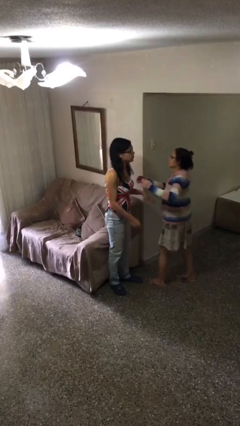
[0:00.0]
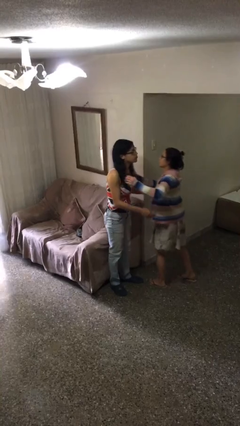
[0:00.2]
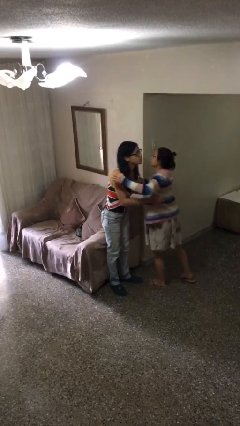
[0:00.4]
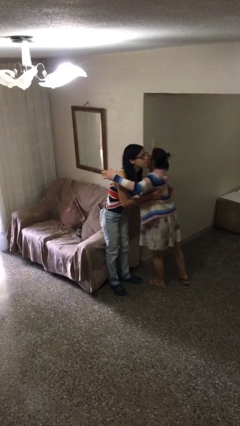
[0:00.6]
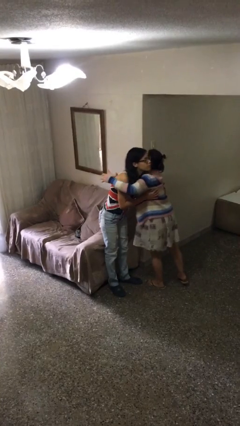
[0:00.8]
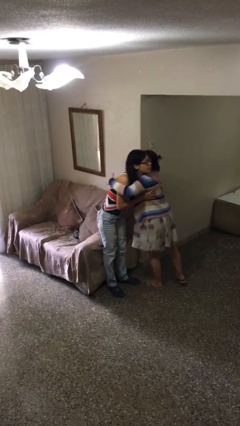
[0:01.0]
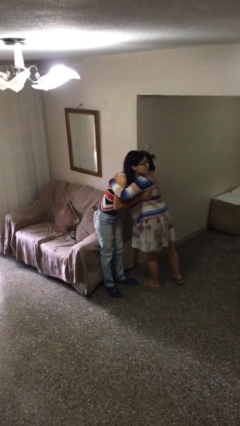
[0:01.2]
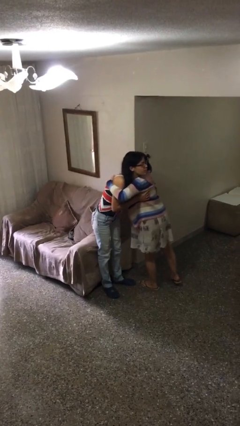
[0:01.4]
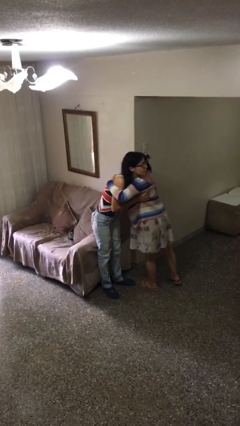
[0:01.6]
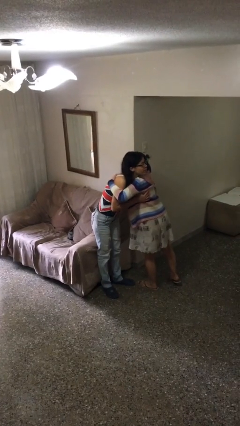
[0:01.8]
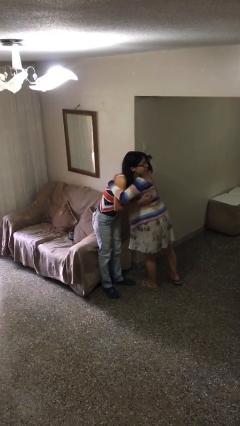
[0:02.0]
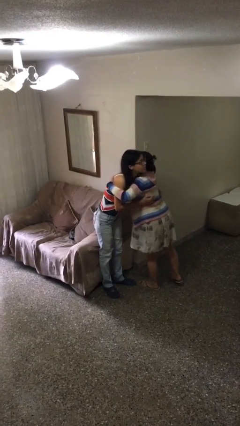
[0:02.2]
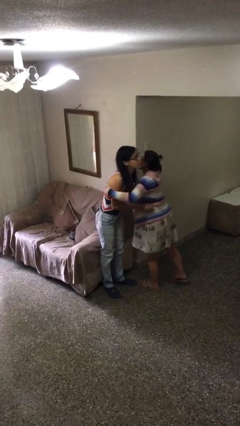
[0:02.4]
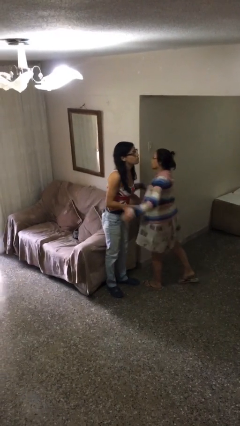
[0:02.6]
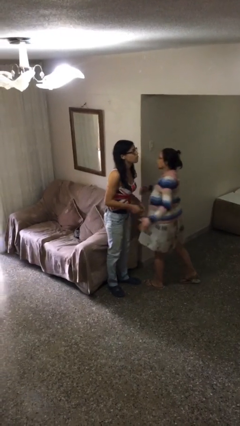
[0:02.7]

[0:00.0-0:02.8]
person embraces person

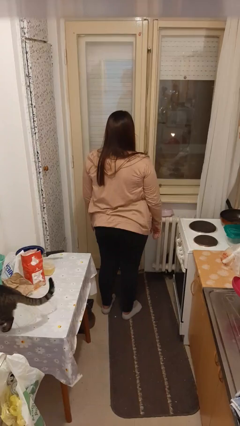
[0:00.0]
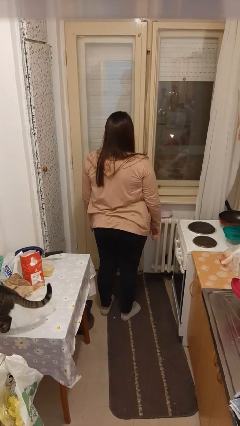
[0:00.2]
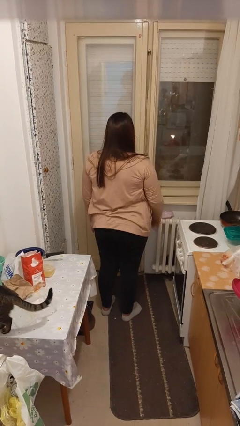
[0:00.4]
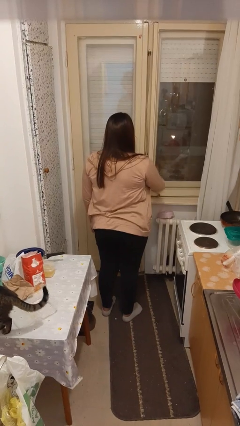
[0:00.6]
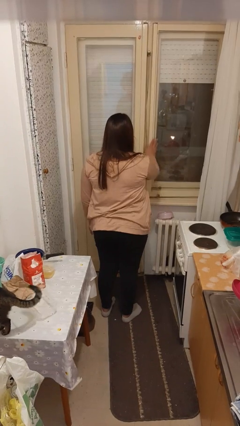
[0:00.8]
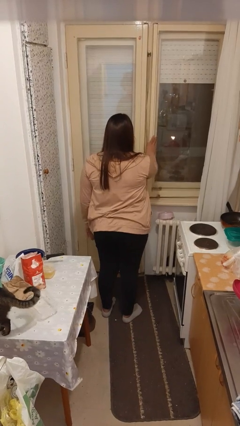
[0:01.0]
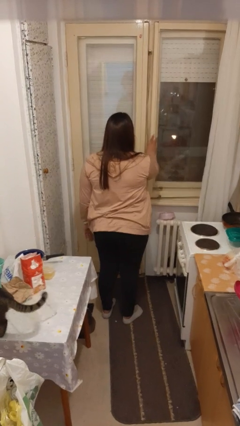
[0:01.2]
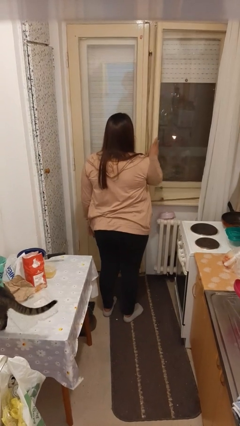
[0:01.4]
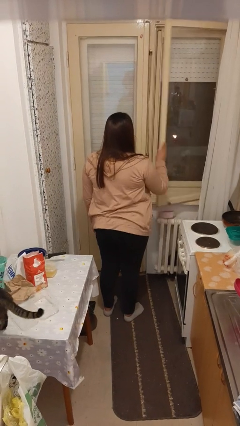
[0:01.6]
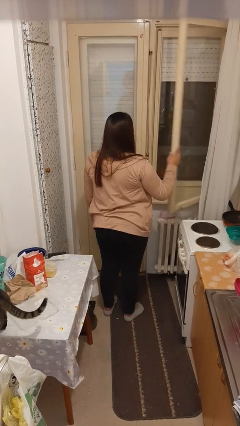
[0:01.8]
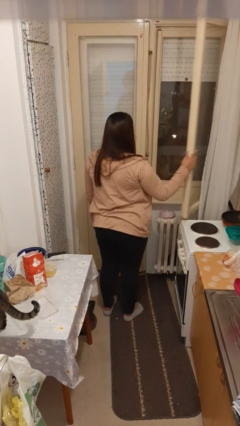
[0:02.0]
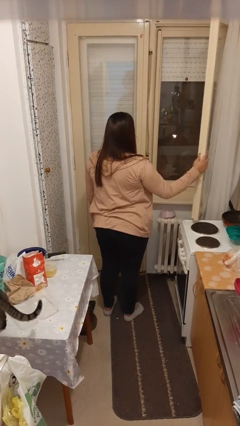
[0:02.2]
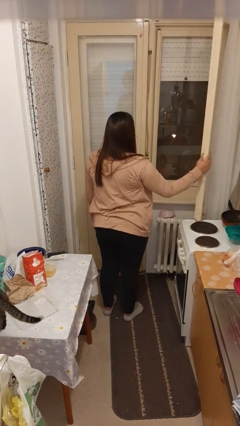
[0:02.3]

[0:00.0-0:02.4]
person opens home window

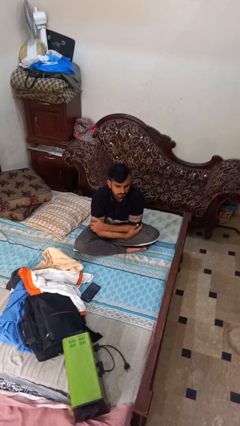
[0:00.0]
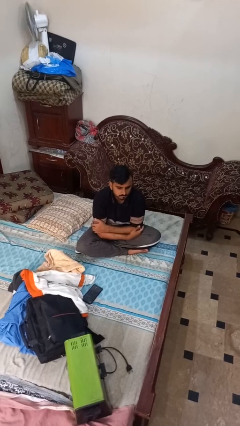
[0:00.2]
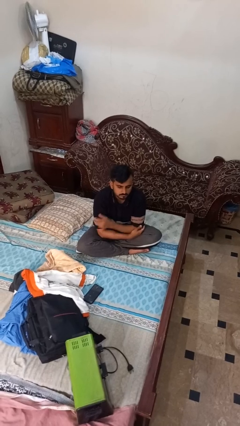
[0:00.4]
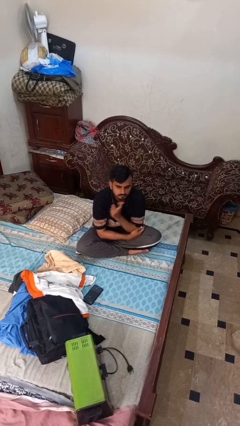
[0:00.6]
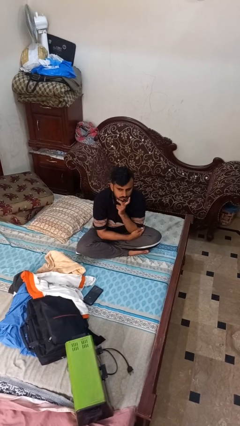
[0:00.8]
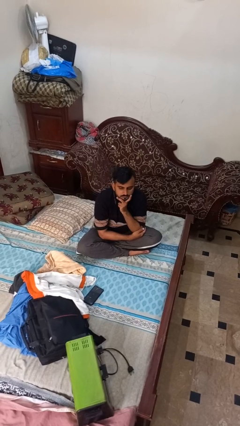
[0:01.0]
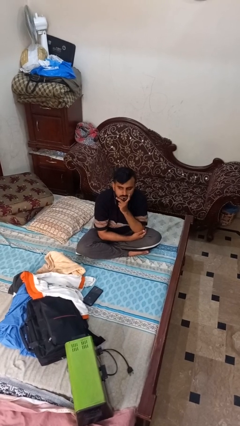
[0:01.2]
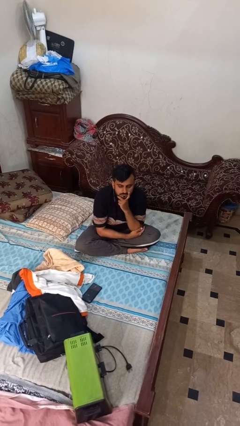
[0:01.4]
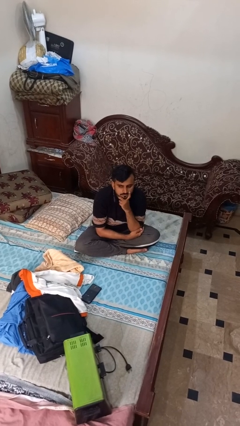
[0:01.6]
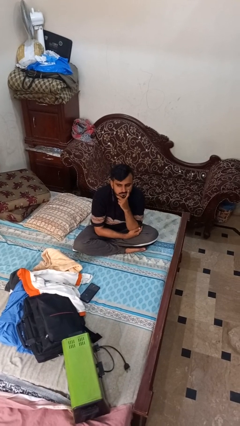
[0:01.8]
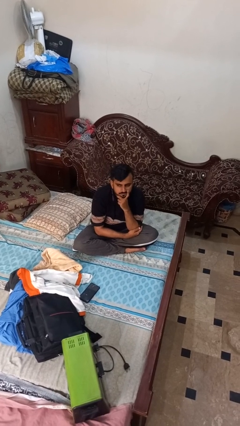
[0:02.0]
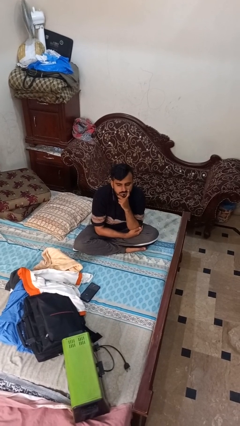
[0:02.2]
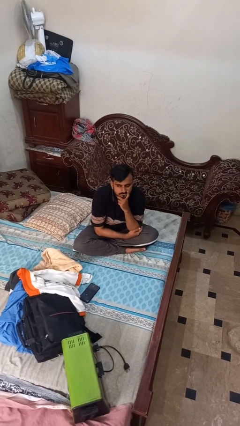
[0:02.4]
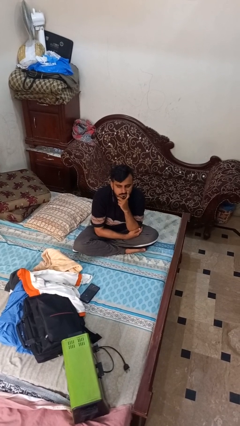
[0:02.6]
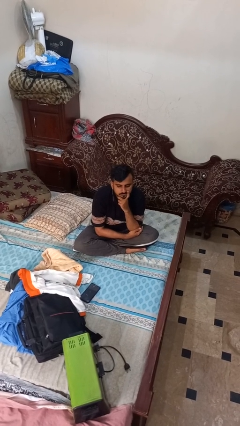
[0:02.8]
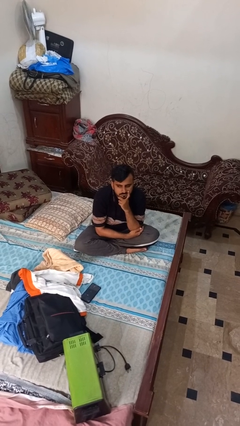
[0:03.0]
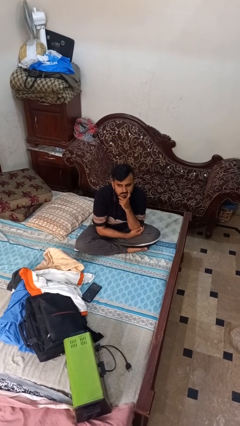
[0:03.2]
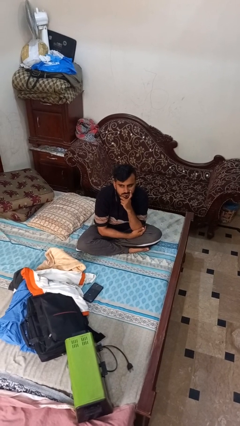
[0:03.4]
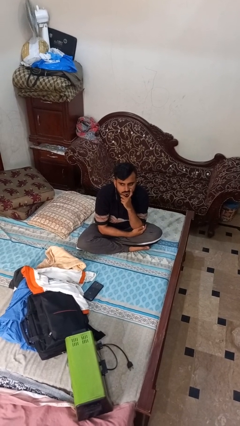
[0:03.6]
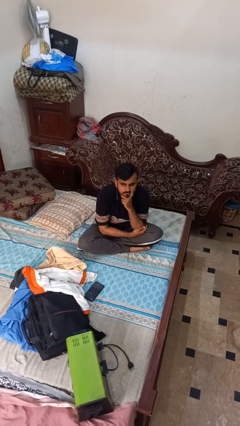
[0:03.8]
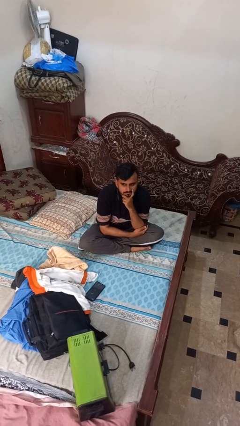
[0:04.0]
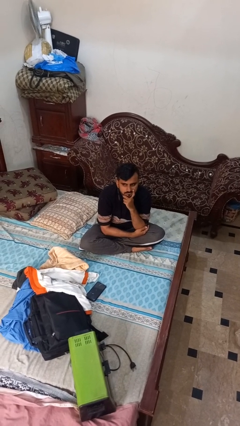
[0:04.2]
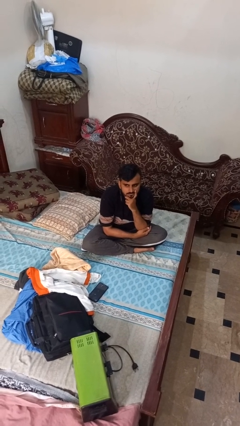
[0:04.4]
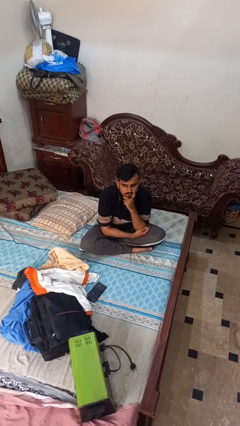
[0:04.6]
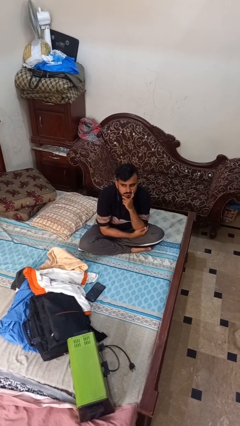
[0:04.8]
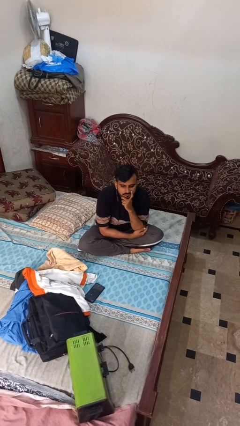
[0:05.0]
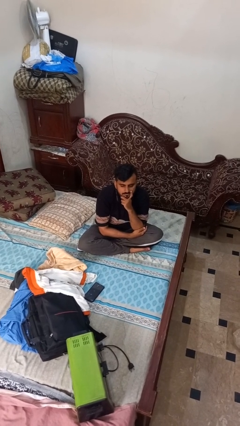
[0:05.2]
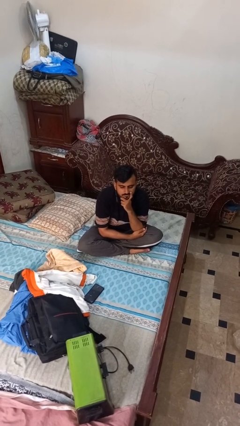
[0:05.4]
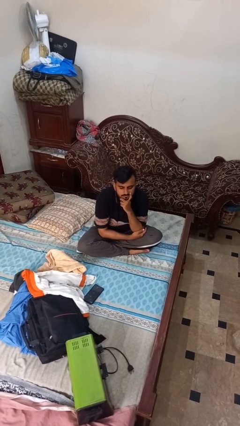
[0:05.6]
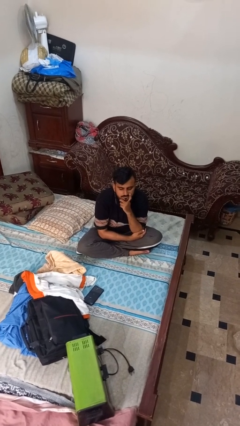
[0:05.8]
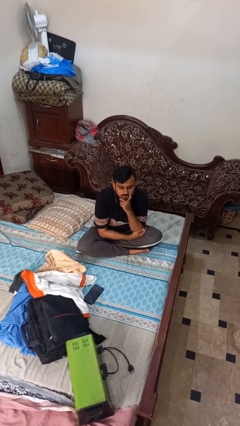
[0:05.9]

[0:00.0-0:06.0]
person strokes chin

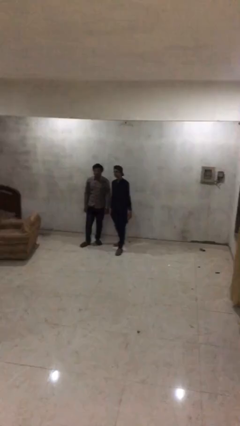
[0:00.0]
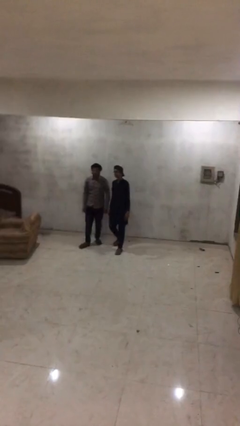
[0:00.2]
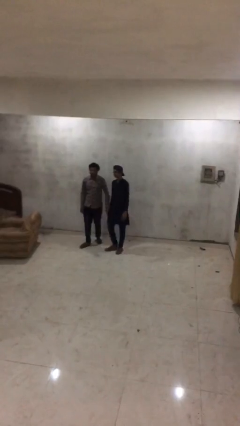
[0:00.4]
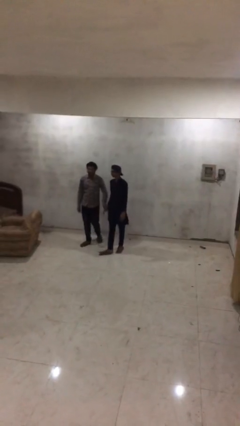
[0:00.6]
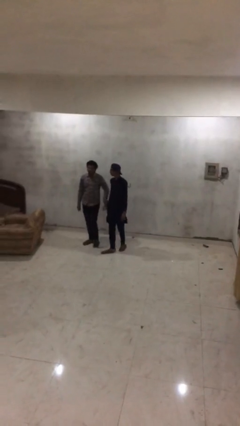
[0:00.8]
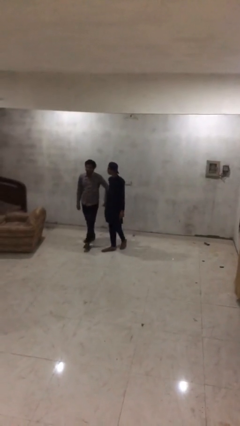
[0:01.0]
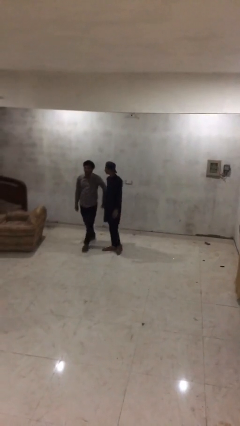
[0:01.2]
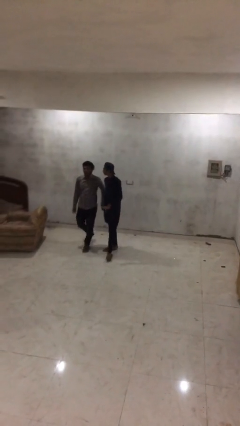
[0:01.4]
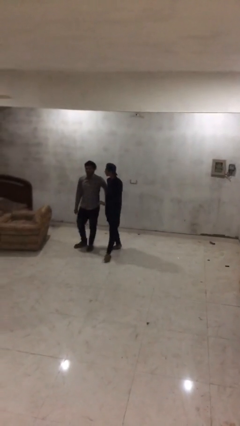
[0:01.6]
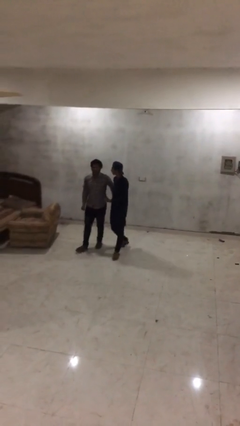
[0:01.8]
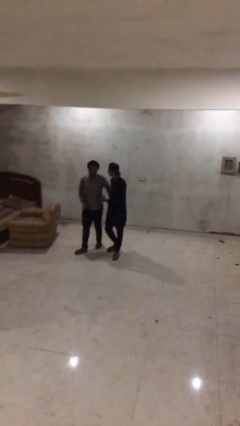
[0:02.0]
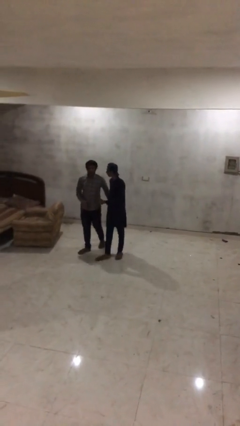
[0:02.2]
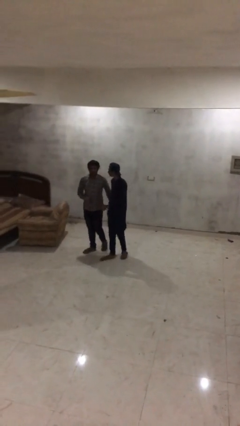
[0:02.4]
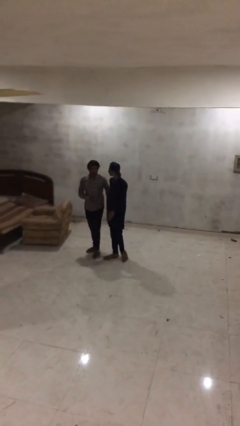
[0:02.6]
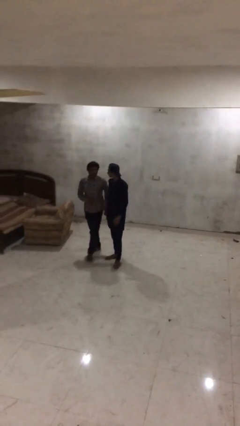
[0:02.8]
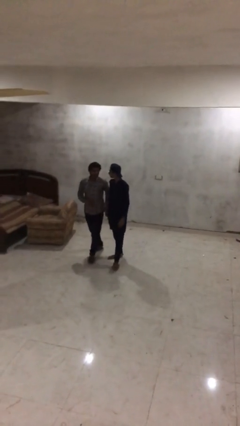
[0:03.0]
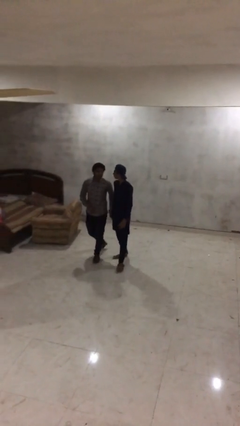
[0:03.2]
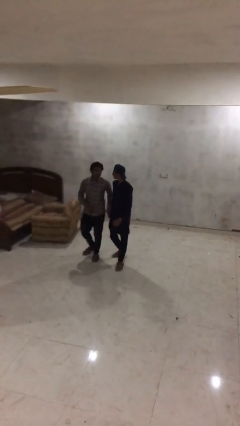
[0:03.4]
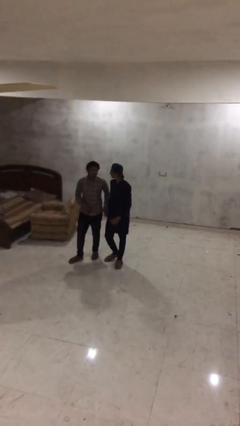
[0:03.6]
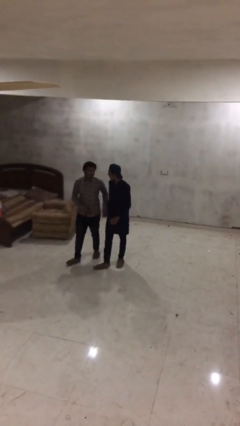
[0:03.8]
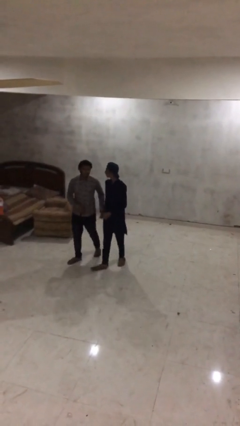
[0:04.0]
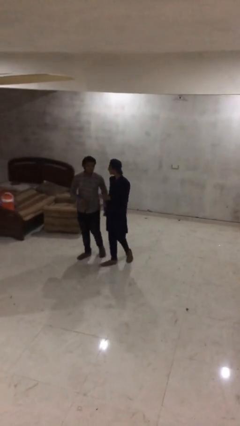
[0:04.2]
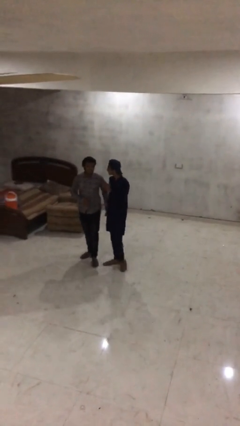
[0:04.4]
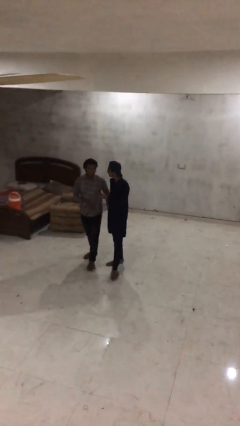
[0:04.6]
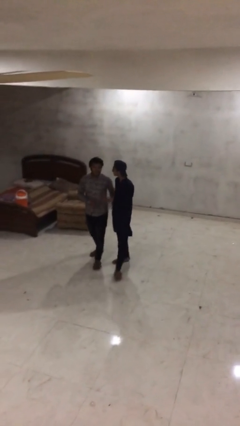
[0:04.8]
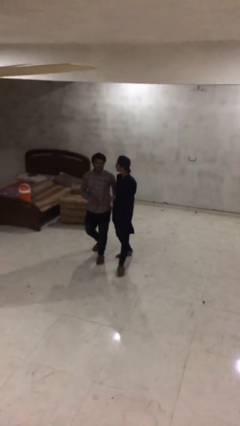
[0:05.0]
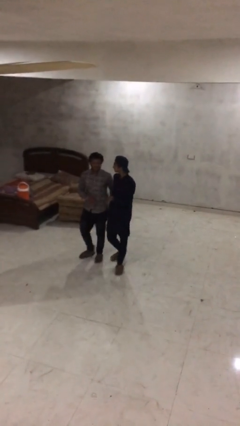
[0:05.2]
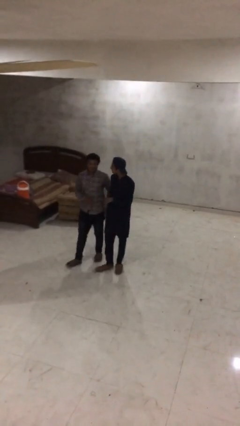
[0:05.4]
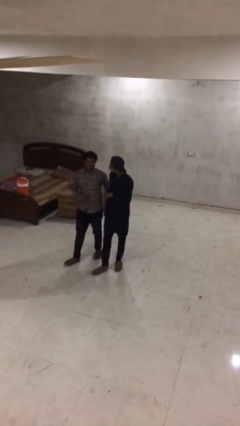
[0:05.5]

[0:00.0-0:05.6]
person holds hand

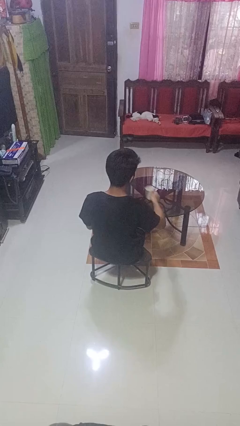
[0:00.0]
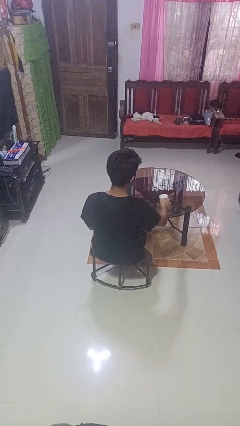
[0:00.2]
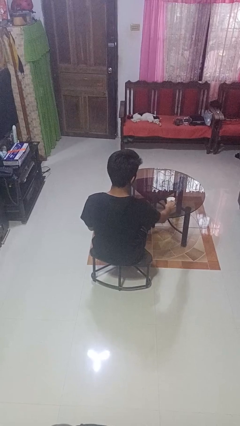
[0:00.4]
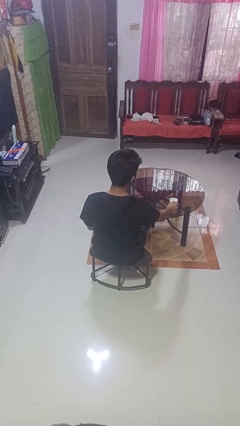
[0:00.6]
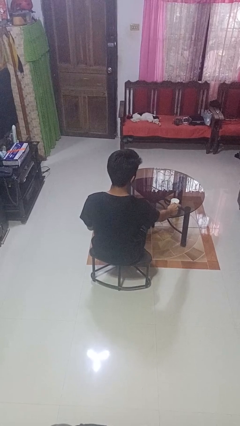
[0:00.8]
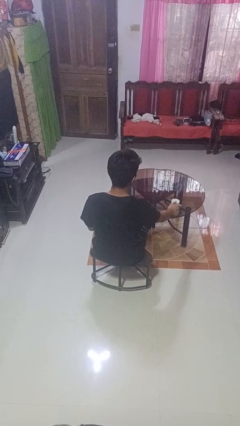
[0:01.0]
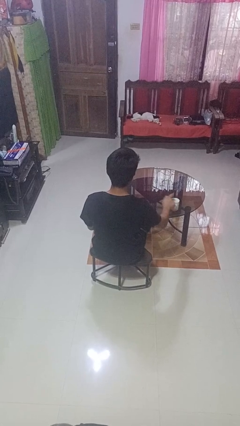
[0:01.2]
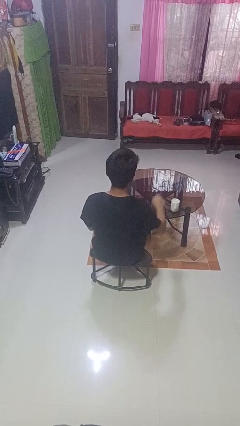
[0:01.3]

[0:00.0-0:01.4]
person puts down object on table
